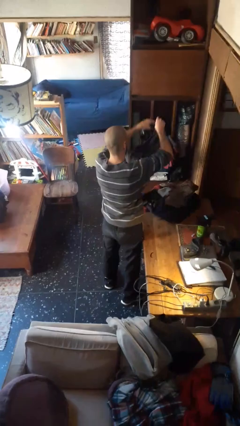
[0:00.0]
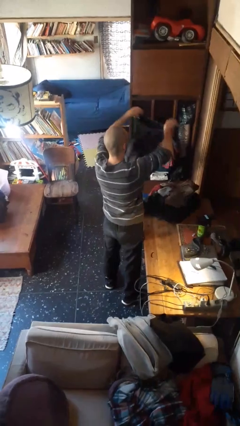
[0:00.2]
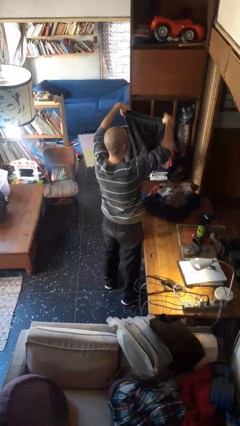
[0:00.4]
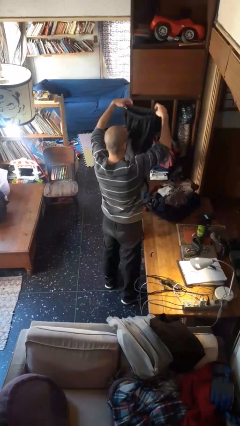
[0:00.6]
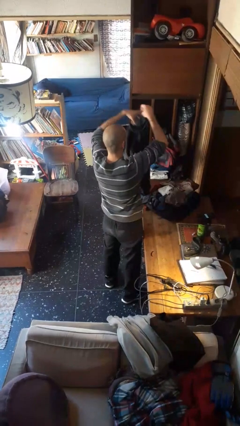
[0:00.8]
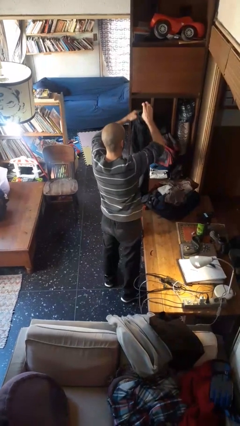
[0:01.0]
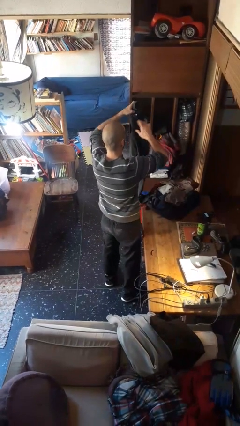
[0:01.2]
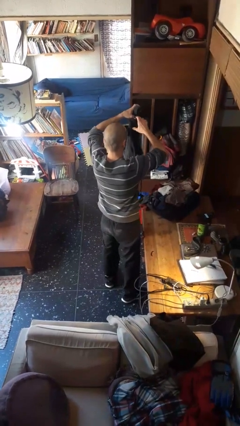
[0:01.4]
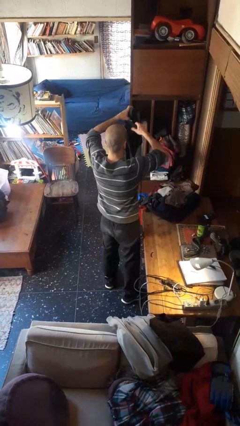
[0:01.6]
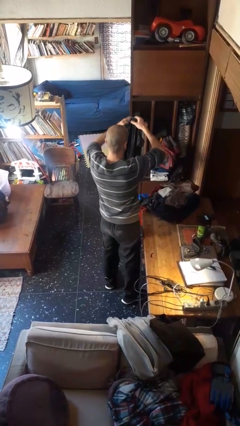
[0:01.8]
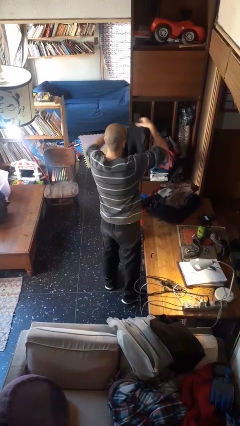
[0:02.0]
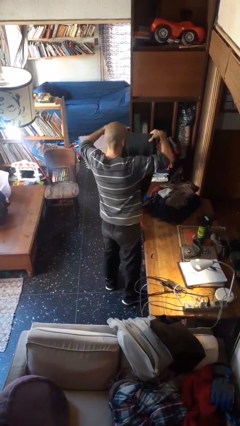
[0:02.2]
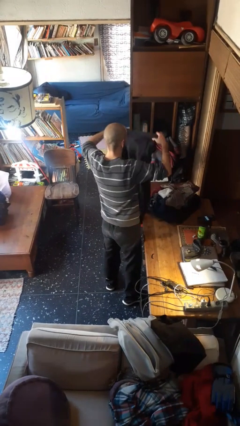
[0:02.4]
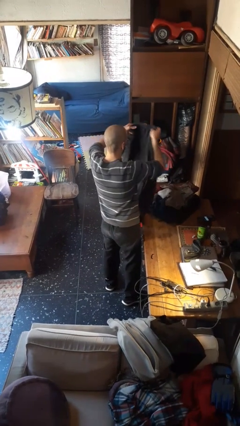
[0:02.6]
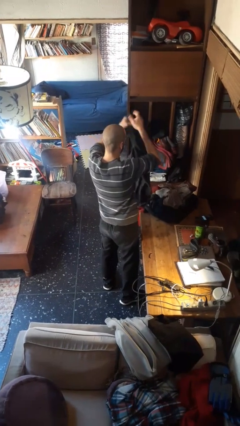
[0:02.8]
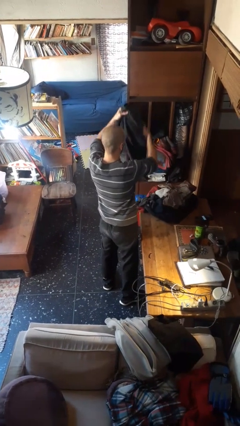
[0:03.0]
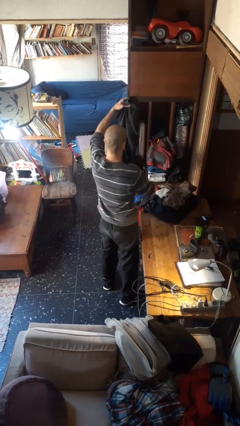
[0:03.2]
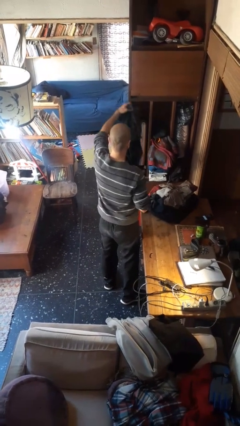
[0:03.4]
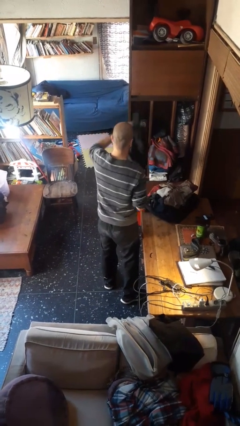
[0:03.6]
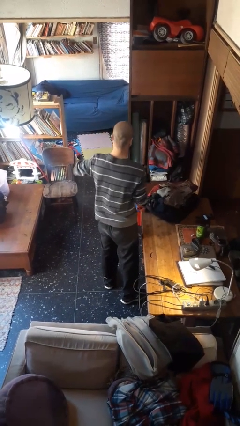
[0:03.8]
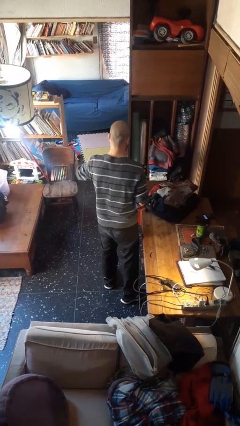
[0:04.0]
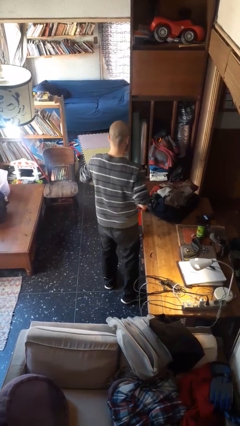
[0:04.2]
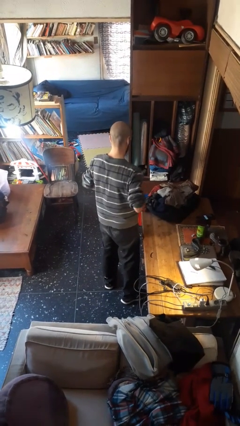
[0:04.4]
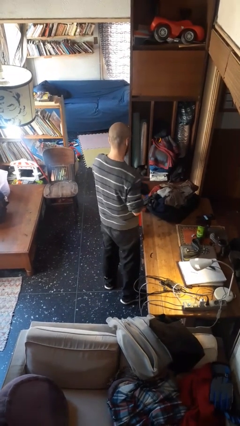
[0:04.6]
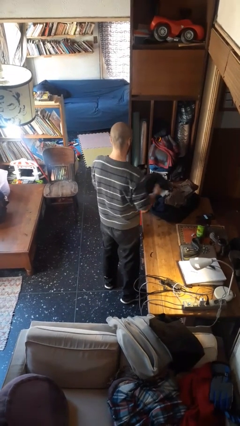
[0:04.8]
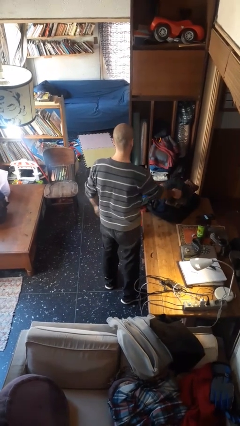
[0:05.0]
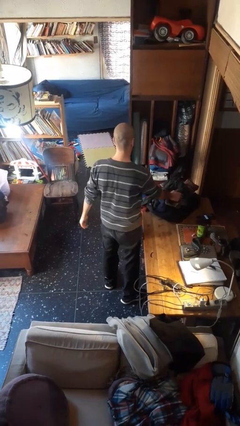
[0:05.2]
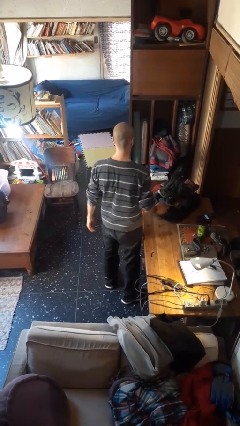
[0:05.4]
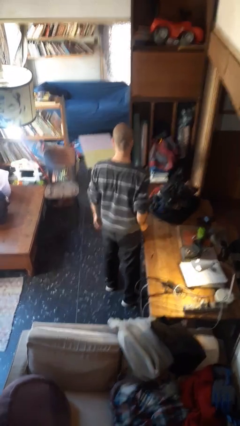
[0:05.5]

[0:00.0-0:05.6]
person folds pants

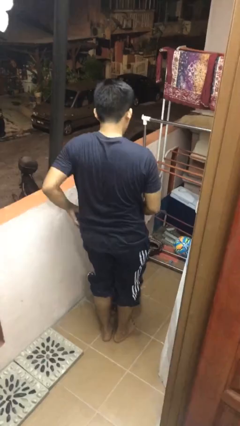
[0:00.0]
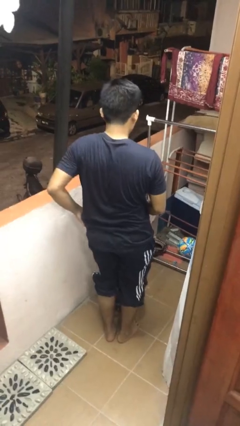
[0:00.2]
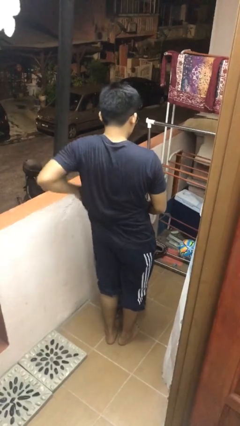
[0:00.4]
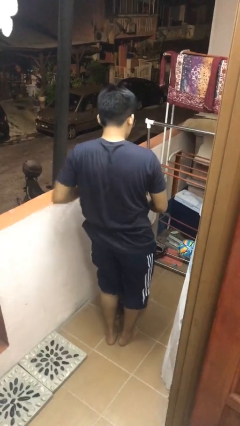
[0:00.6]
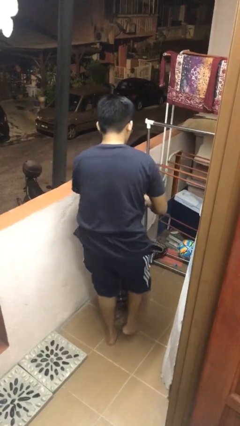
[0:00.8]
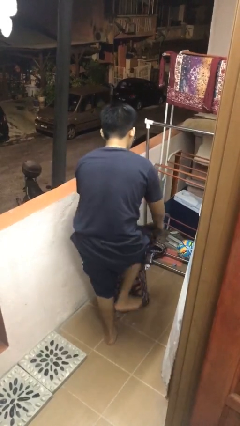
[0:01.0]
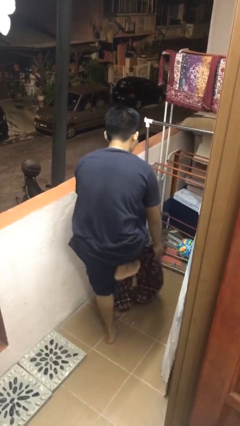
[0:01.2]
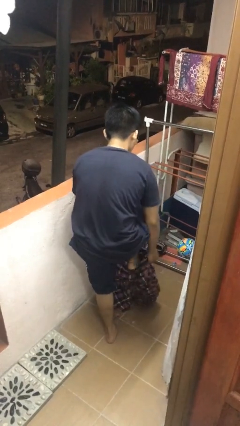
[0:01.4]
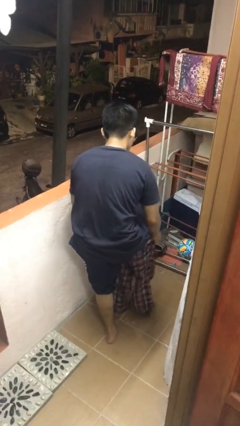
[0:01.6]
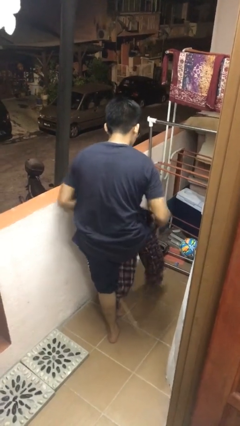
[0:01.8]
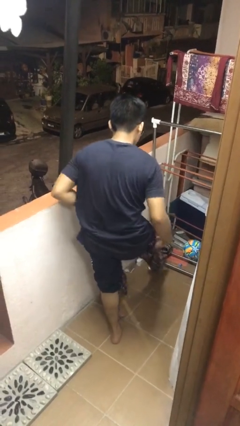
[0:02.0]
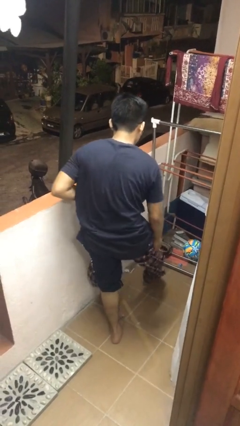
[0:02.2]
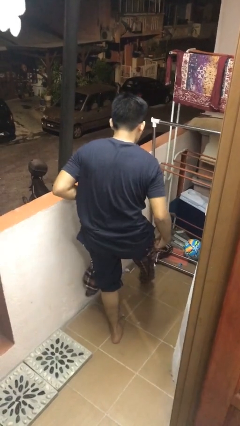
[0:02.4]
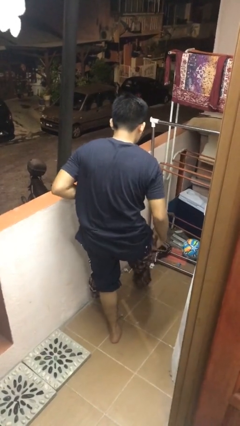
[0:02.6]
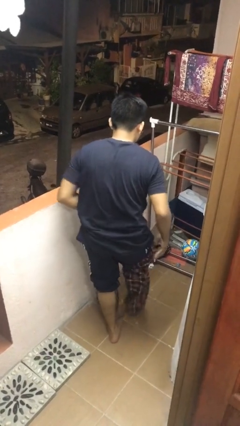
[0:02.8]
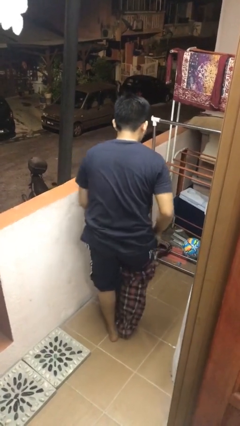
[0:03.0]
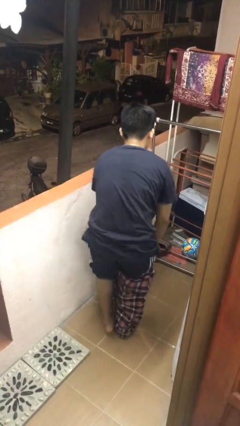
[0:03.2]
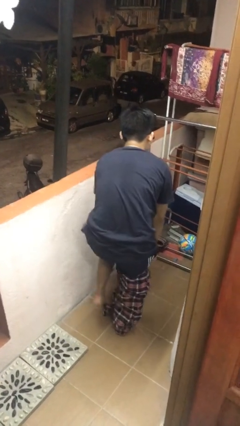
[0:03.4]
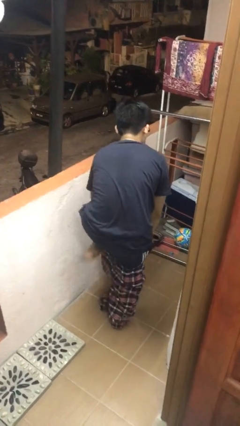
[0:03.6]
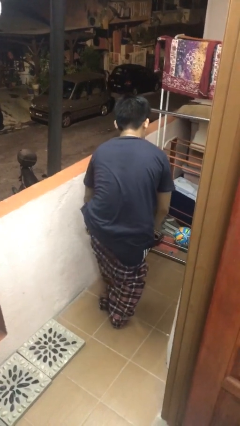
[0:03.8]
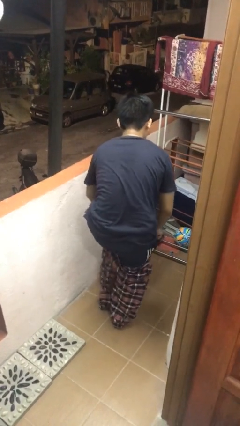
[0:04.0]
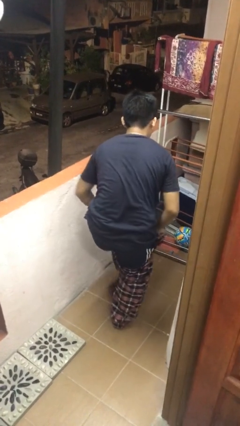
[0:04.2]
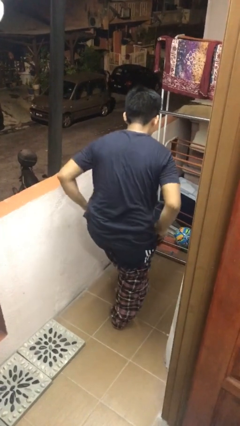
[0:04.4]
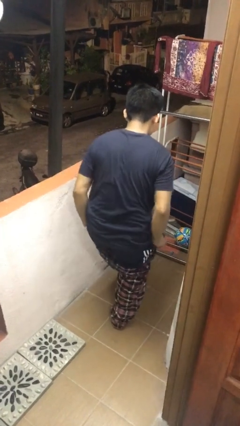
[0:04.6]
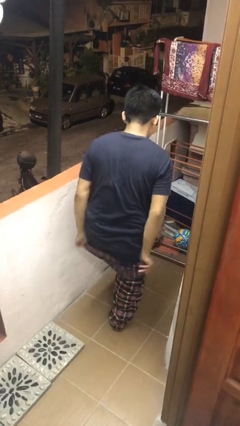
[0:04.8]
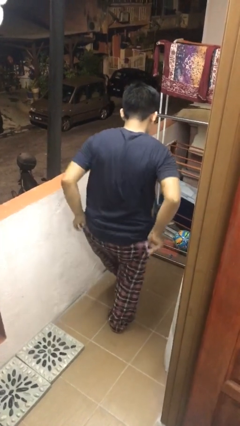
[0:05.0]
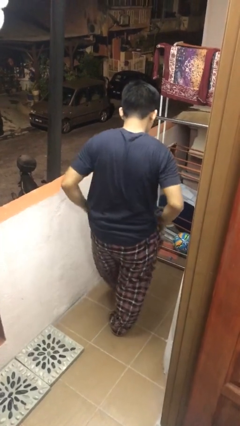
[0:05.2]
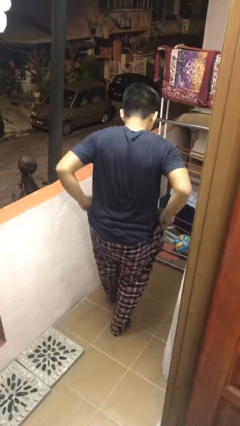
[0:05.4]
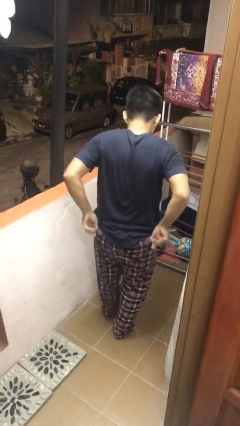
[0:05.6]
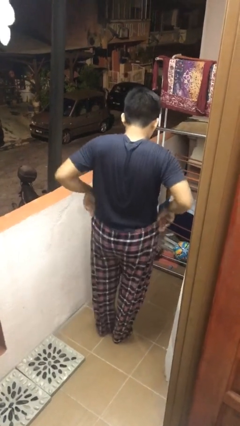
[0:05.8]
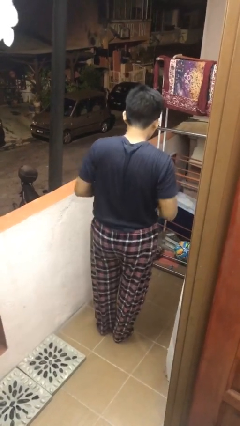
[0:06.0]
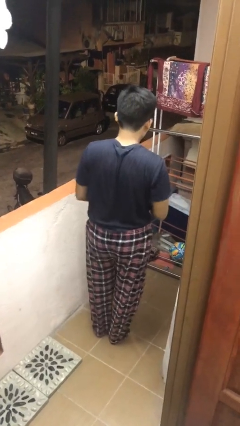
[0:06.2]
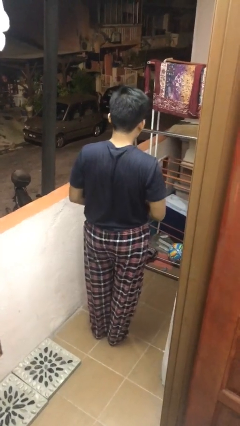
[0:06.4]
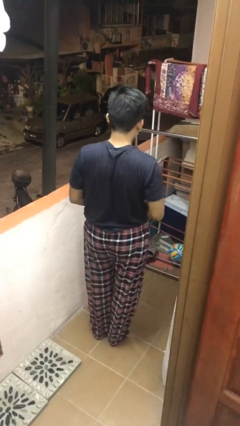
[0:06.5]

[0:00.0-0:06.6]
person puts on pants

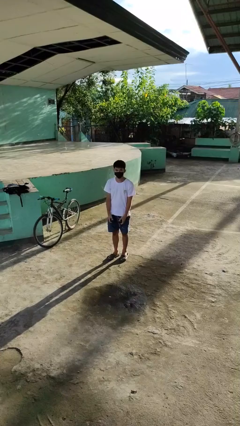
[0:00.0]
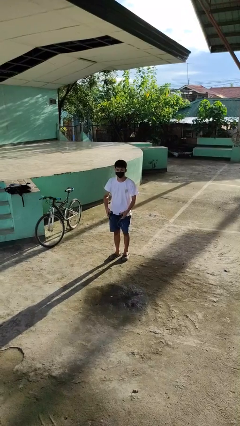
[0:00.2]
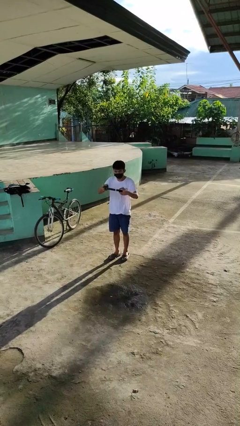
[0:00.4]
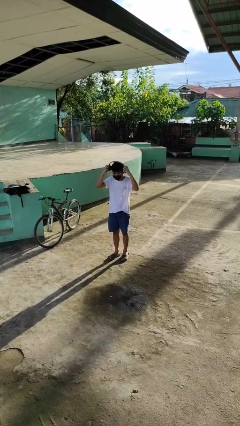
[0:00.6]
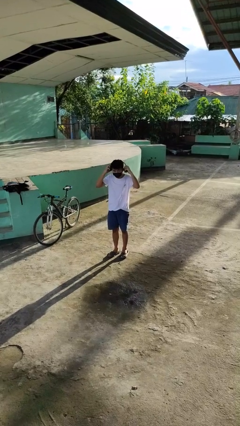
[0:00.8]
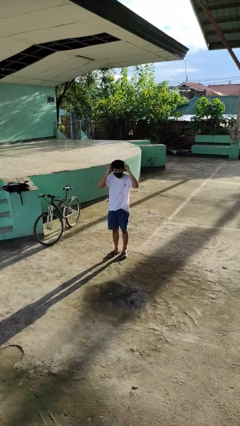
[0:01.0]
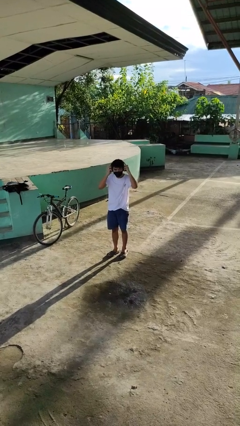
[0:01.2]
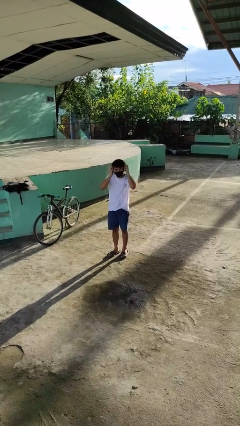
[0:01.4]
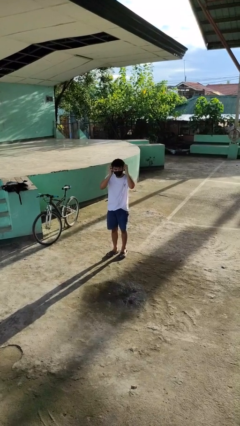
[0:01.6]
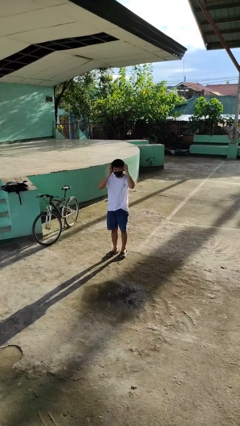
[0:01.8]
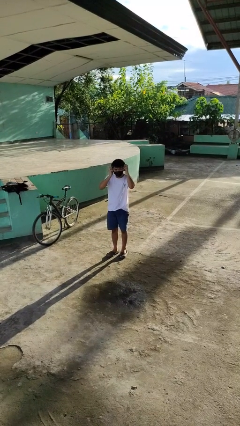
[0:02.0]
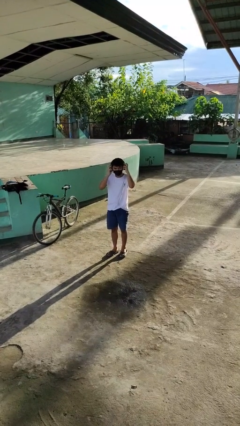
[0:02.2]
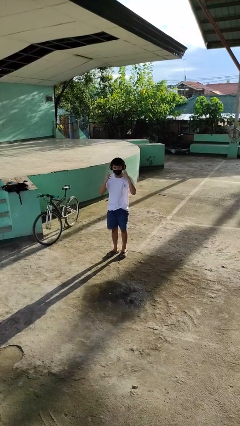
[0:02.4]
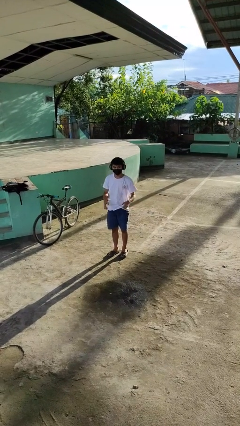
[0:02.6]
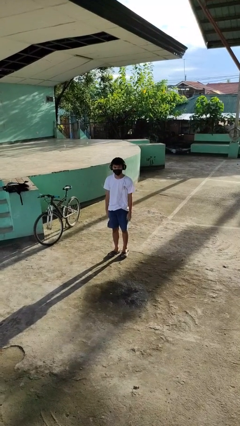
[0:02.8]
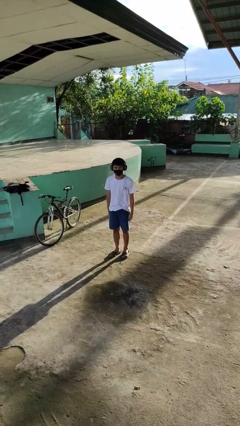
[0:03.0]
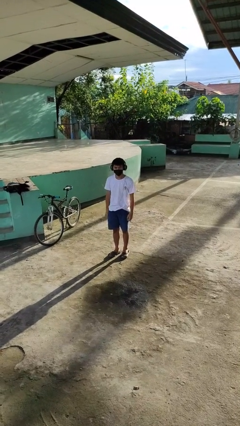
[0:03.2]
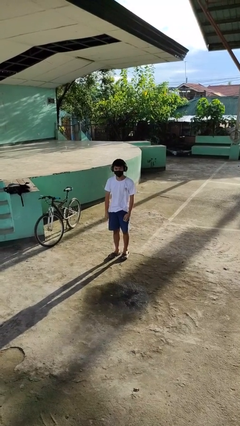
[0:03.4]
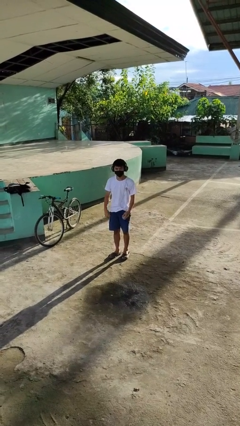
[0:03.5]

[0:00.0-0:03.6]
person puts on headphones

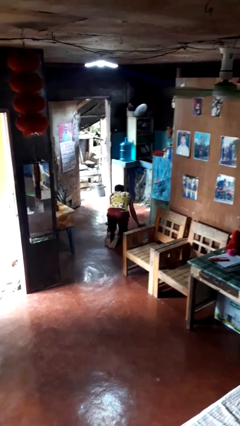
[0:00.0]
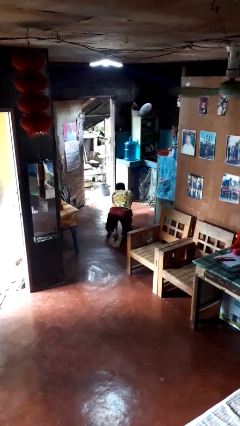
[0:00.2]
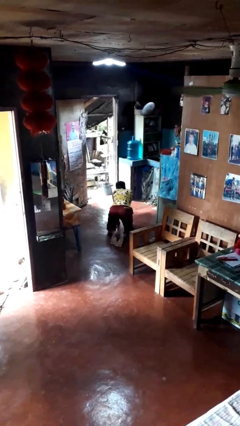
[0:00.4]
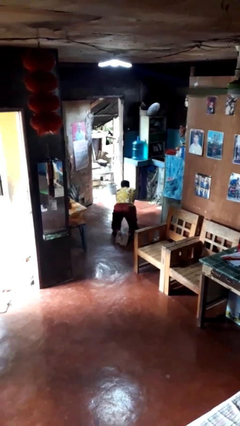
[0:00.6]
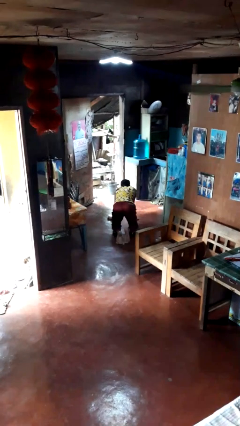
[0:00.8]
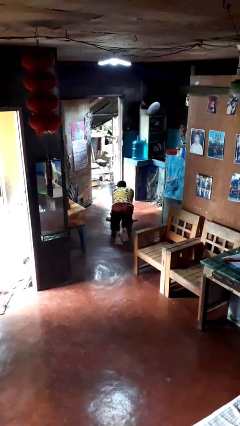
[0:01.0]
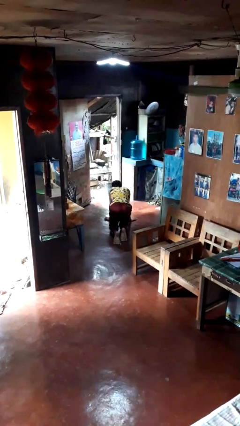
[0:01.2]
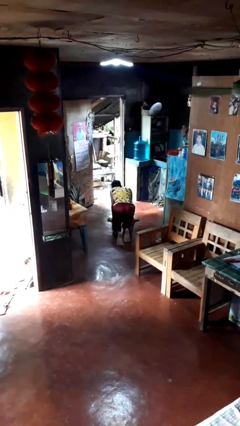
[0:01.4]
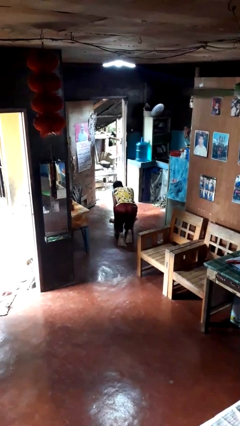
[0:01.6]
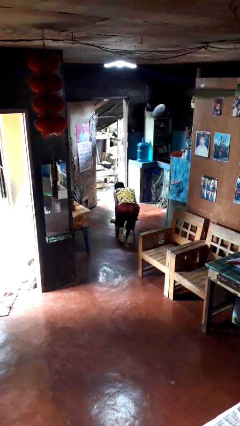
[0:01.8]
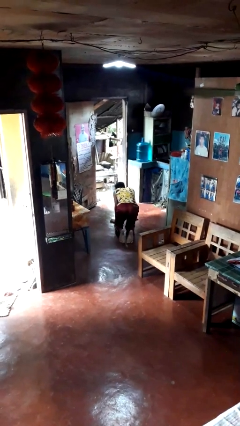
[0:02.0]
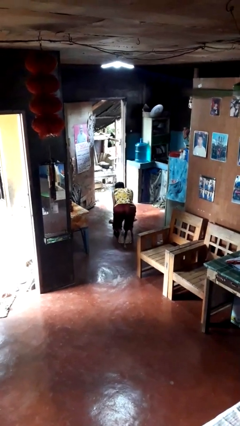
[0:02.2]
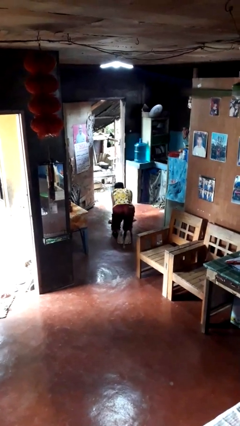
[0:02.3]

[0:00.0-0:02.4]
person crawls
